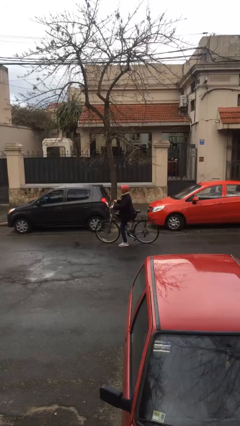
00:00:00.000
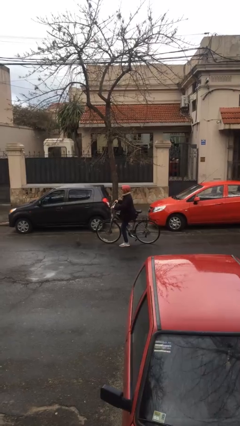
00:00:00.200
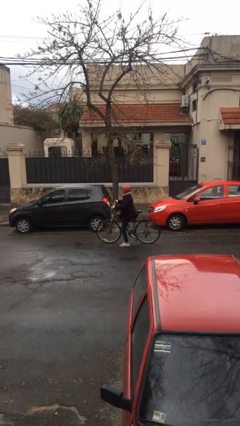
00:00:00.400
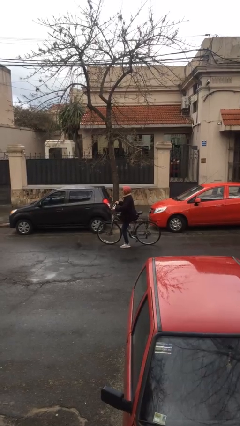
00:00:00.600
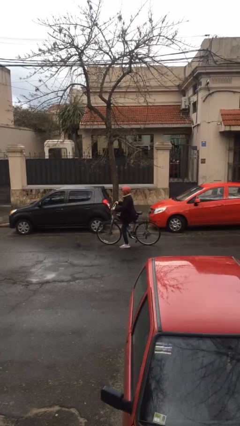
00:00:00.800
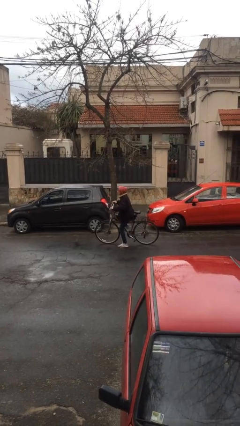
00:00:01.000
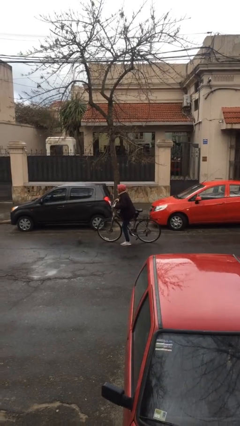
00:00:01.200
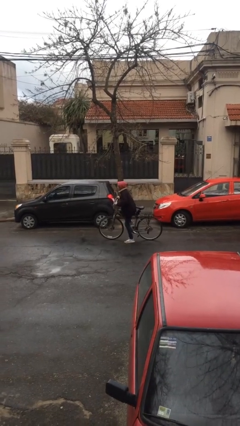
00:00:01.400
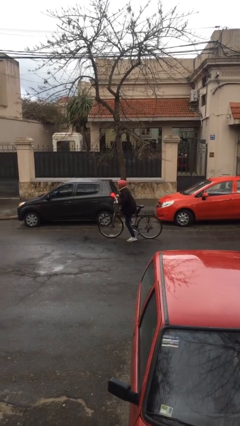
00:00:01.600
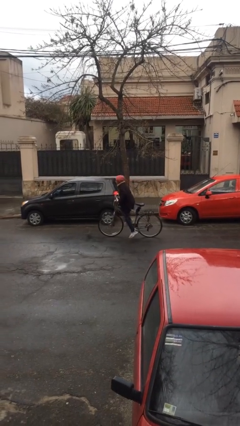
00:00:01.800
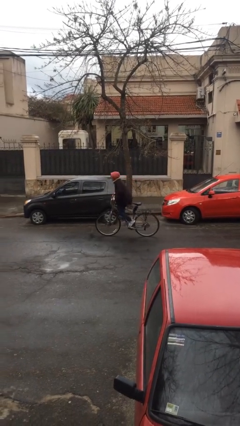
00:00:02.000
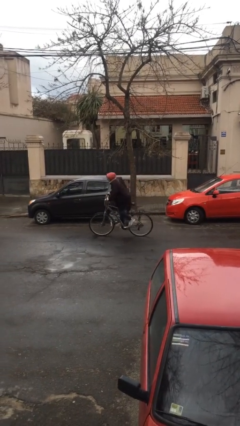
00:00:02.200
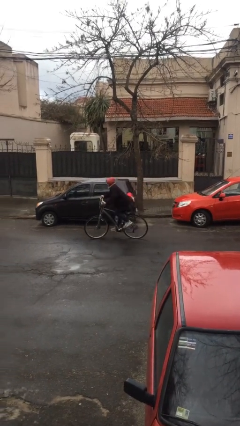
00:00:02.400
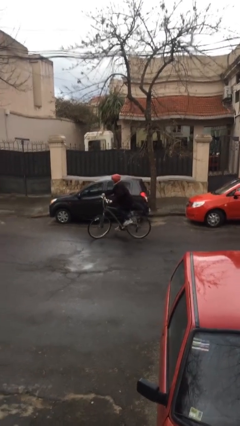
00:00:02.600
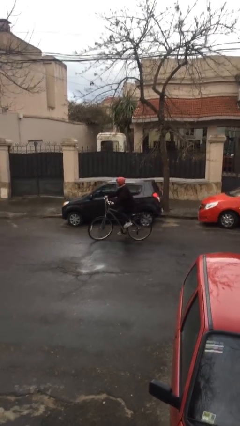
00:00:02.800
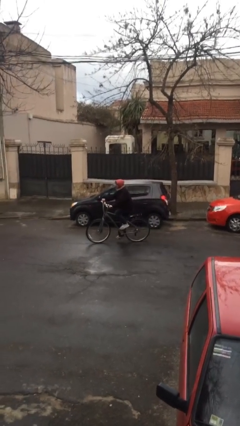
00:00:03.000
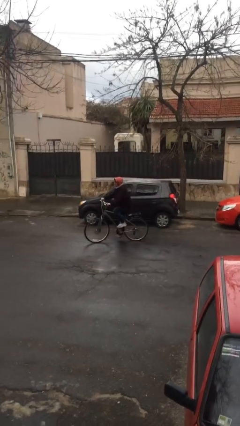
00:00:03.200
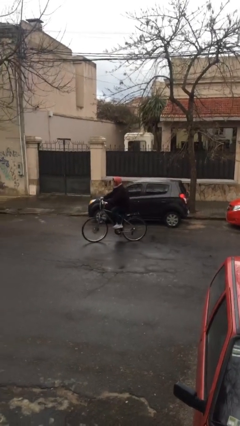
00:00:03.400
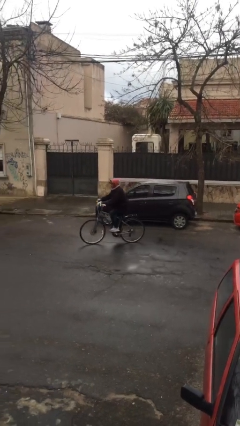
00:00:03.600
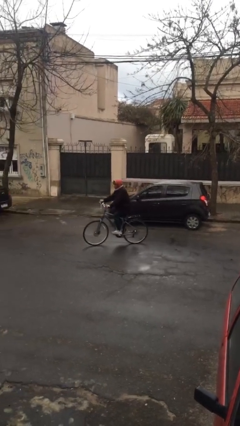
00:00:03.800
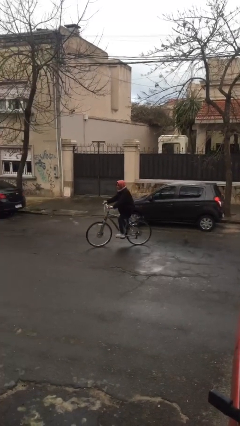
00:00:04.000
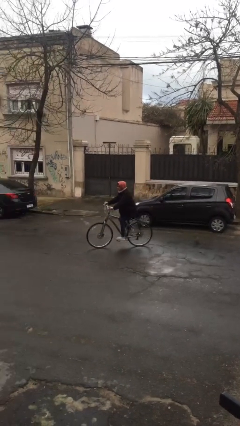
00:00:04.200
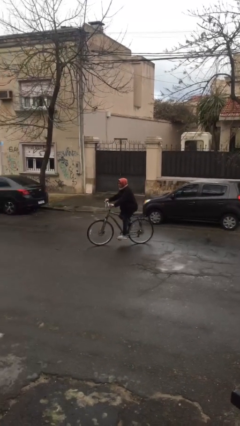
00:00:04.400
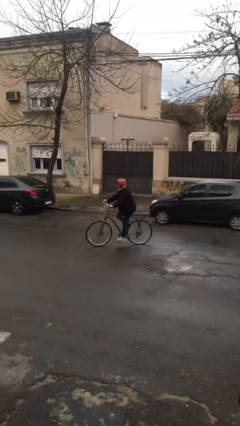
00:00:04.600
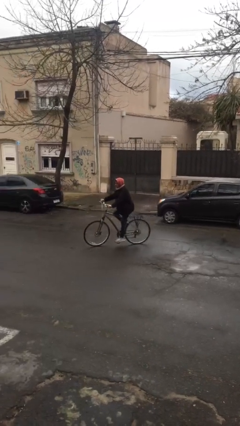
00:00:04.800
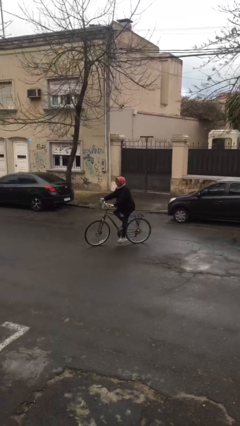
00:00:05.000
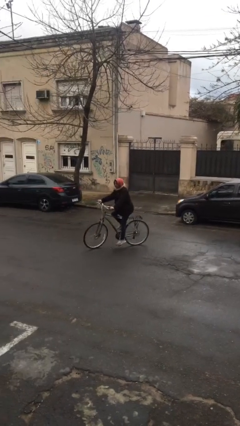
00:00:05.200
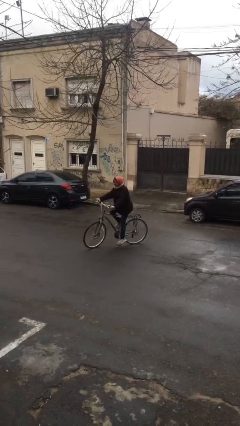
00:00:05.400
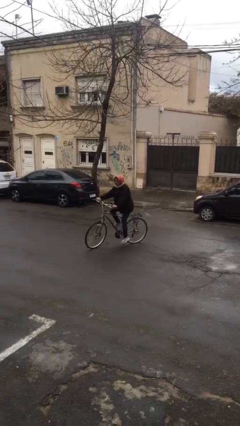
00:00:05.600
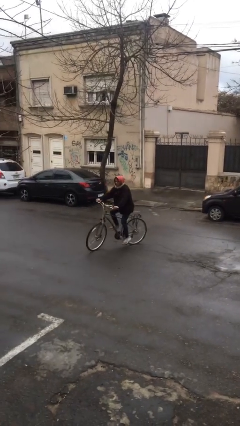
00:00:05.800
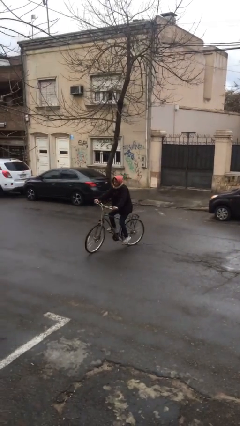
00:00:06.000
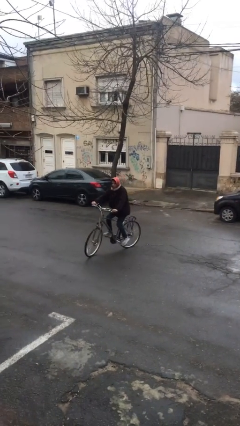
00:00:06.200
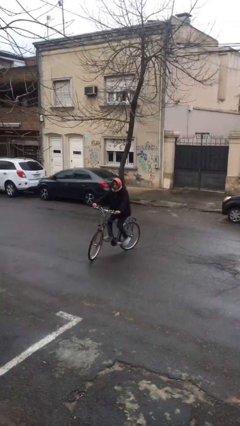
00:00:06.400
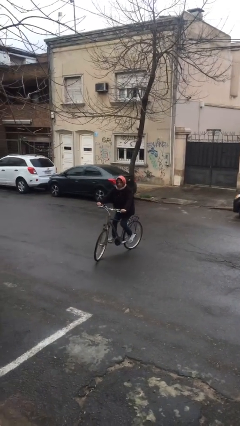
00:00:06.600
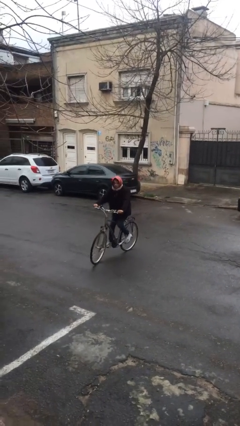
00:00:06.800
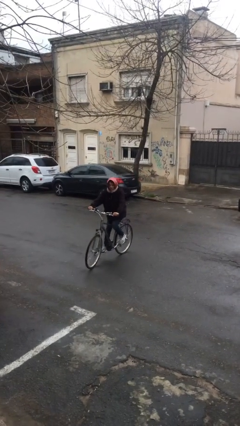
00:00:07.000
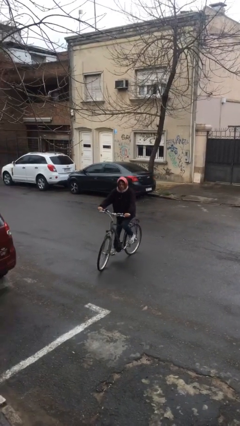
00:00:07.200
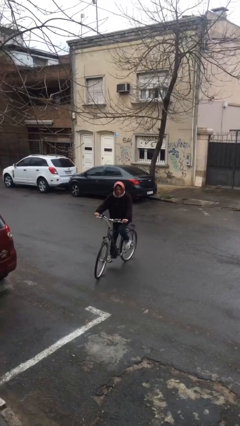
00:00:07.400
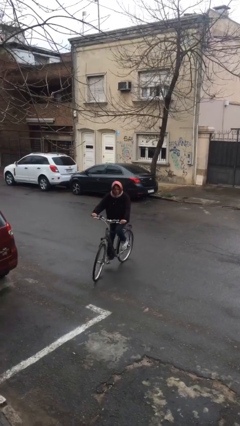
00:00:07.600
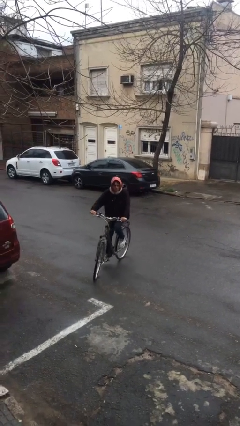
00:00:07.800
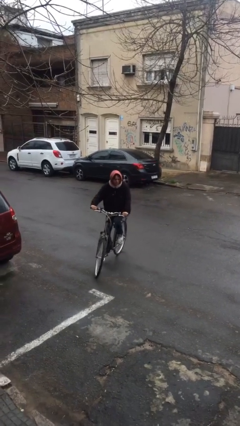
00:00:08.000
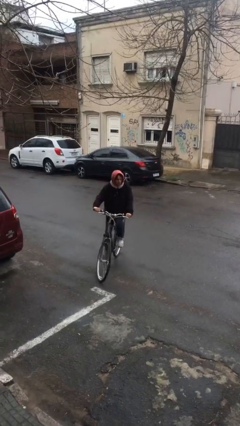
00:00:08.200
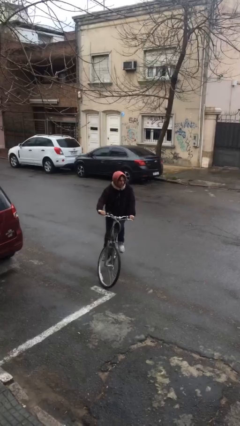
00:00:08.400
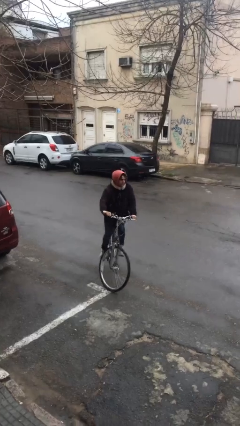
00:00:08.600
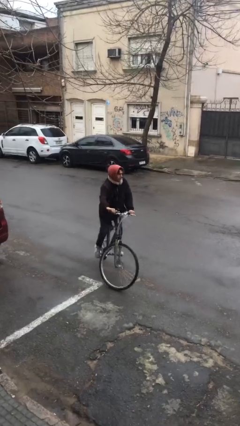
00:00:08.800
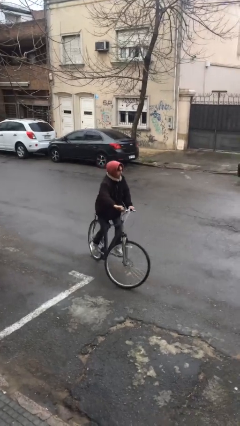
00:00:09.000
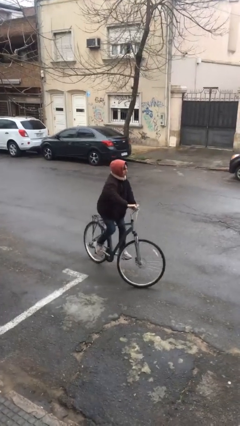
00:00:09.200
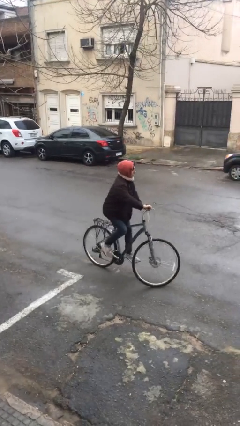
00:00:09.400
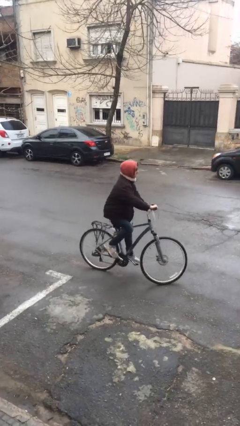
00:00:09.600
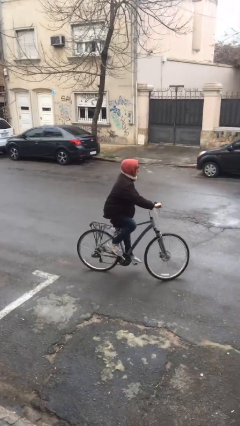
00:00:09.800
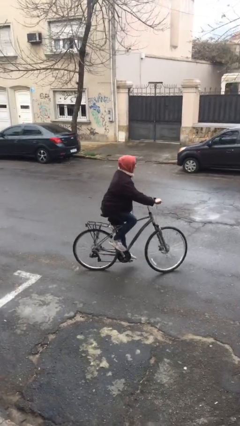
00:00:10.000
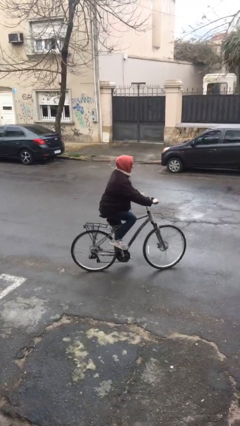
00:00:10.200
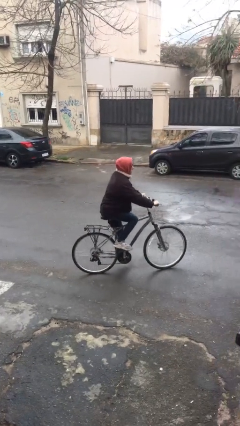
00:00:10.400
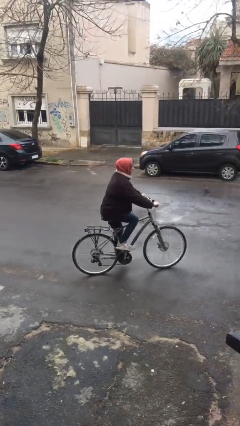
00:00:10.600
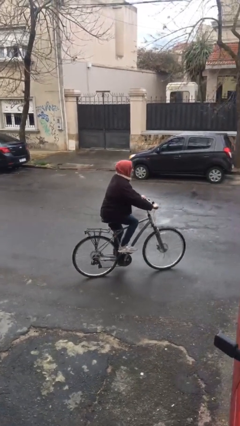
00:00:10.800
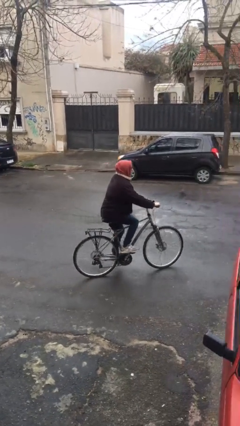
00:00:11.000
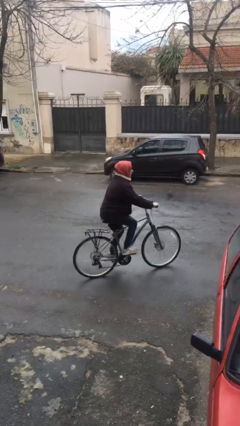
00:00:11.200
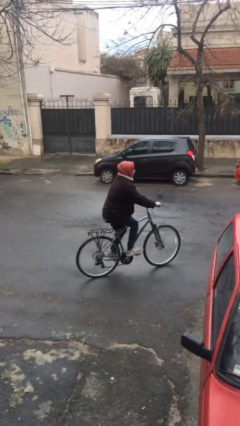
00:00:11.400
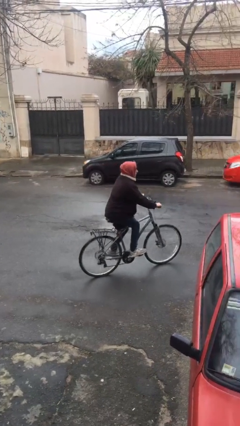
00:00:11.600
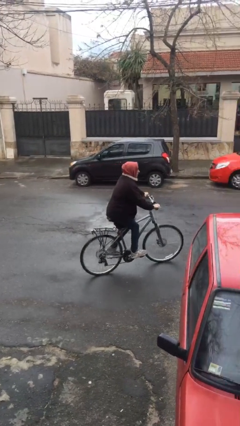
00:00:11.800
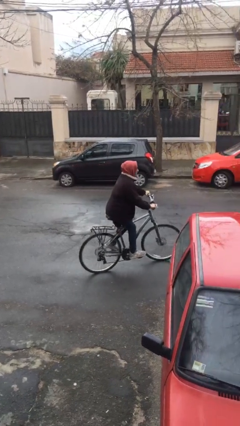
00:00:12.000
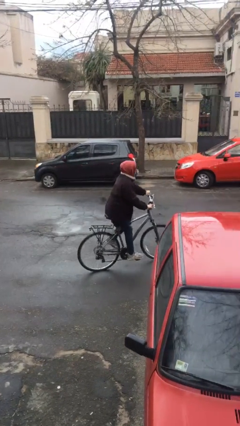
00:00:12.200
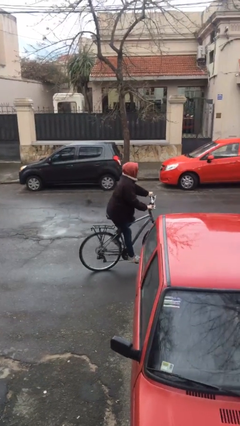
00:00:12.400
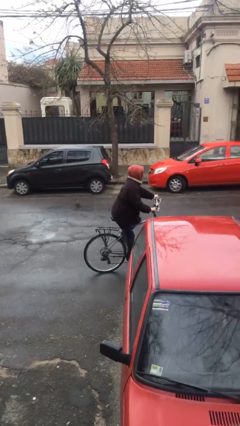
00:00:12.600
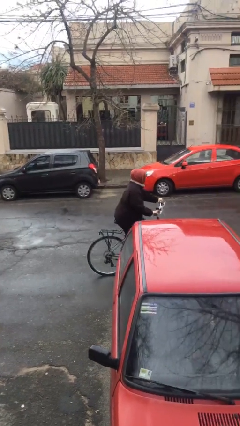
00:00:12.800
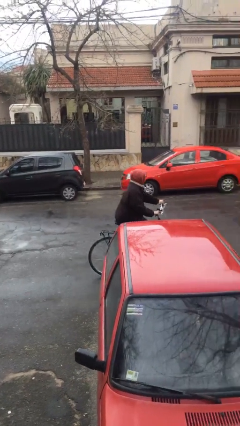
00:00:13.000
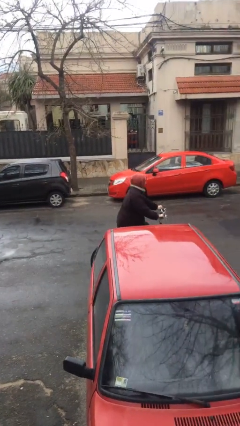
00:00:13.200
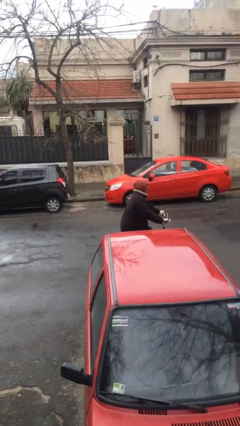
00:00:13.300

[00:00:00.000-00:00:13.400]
person rides bicycle

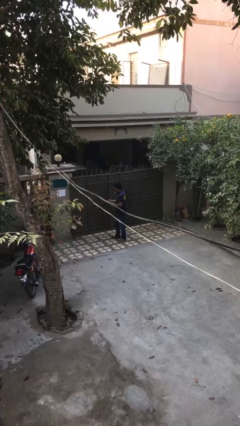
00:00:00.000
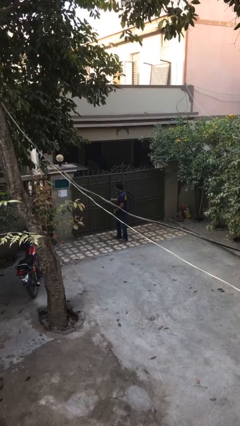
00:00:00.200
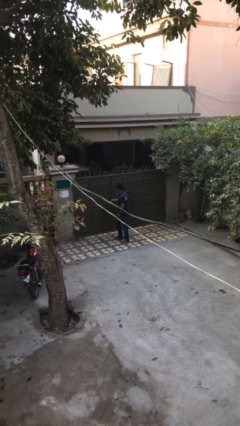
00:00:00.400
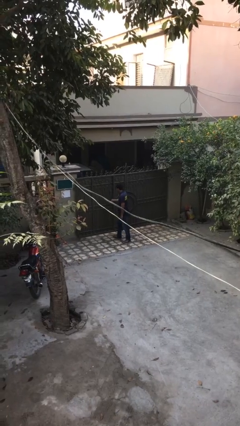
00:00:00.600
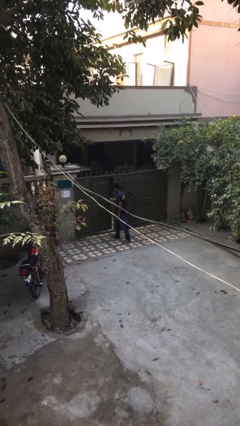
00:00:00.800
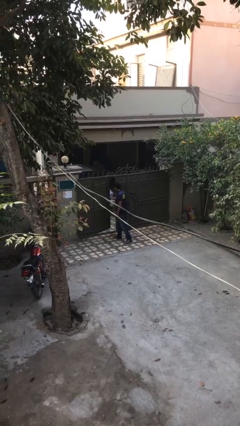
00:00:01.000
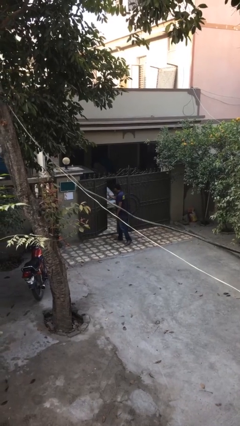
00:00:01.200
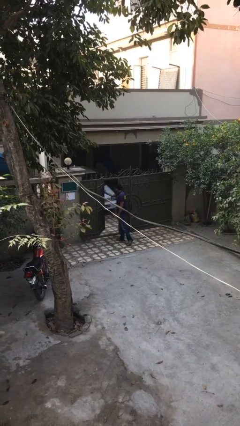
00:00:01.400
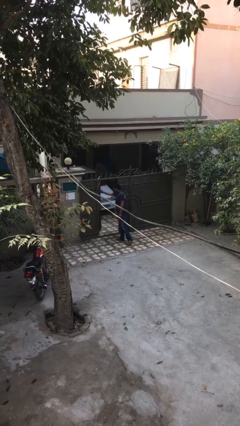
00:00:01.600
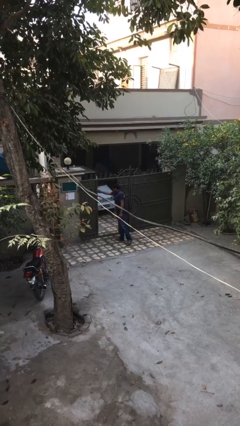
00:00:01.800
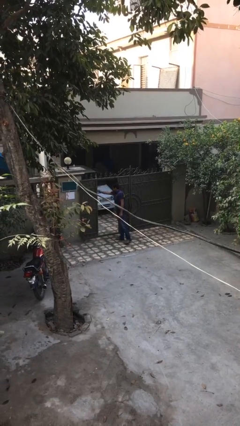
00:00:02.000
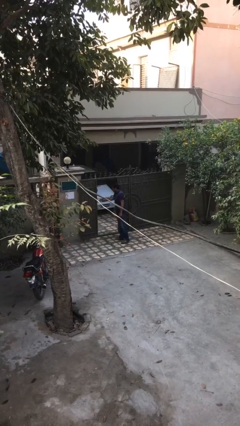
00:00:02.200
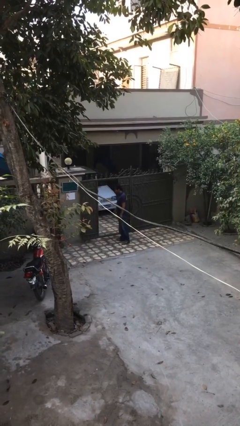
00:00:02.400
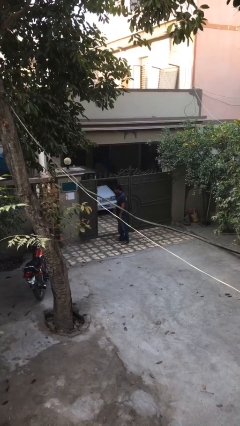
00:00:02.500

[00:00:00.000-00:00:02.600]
person opens facility door

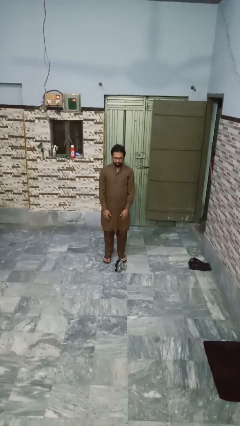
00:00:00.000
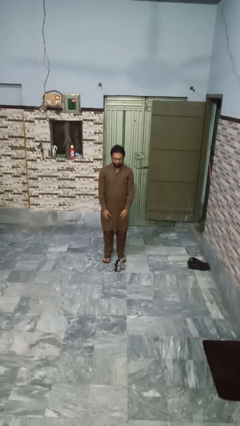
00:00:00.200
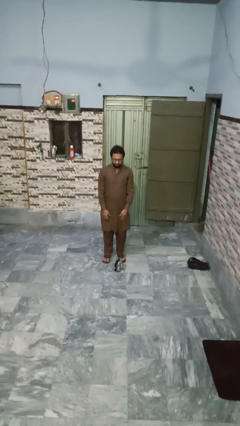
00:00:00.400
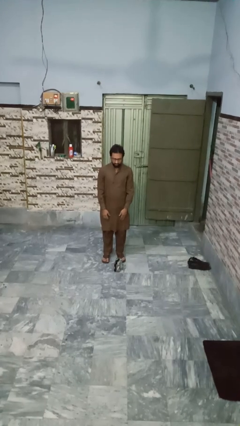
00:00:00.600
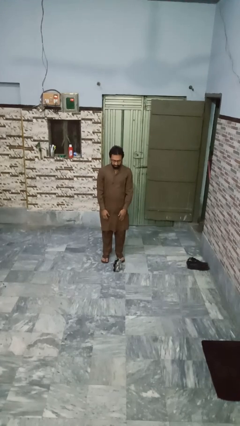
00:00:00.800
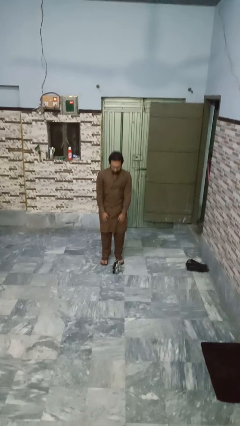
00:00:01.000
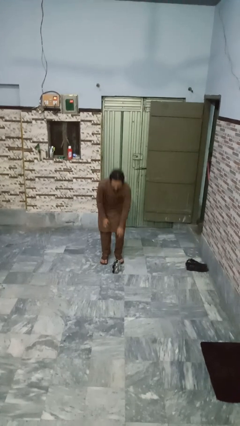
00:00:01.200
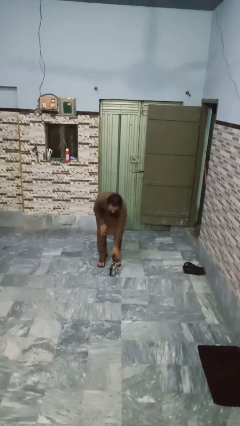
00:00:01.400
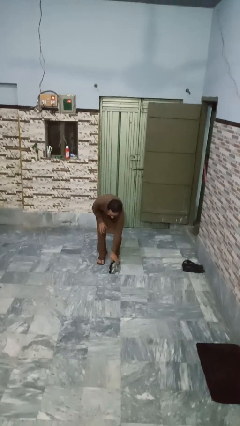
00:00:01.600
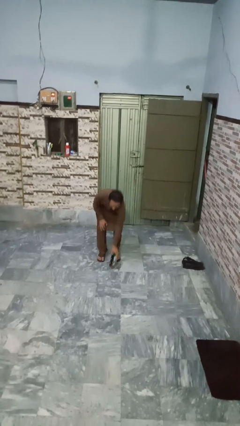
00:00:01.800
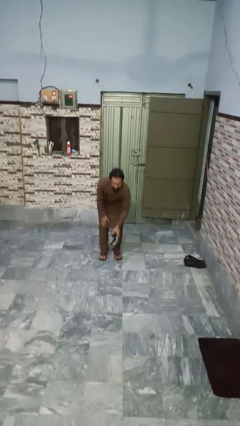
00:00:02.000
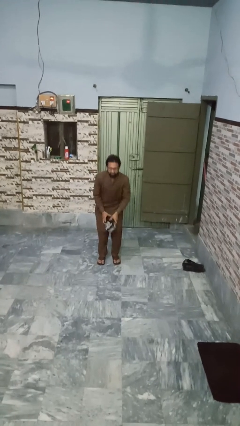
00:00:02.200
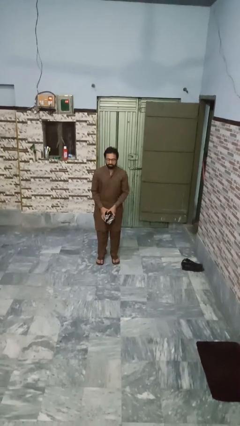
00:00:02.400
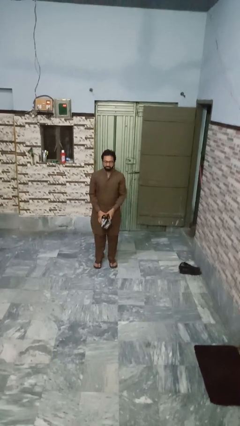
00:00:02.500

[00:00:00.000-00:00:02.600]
person picks up object from floor
